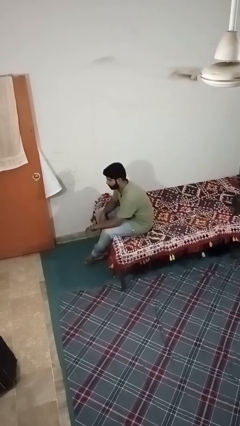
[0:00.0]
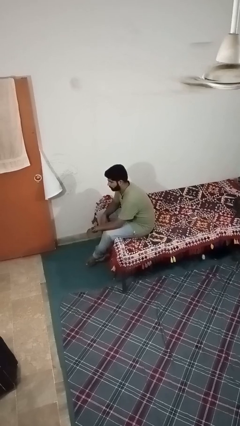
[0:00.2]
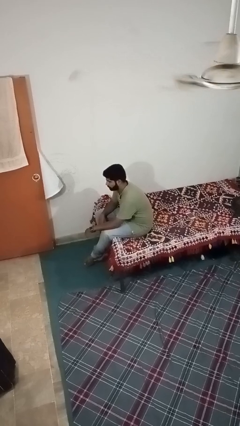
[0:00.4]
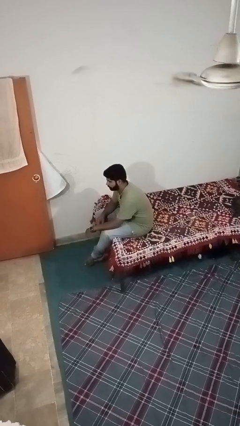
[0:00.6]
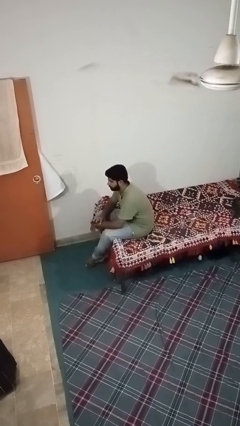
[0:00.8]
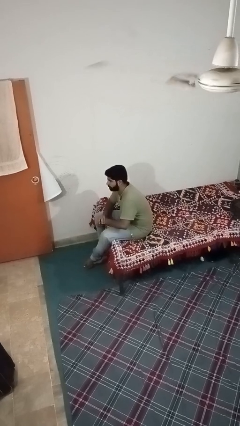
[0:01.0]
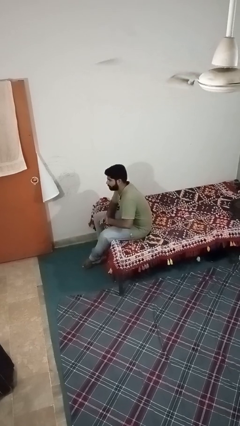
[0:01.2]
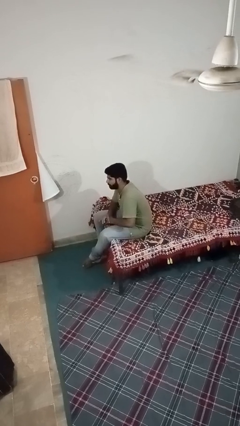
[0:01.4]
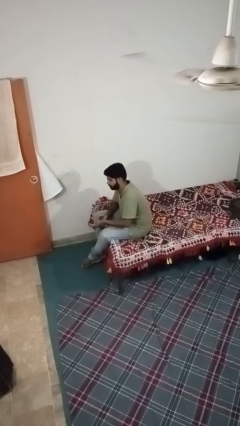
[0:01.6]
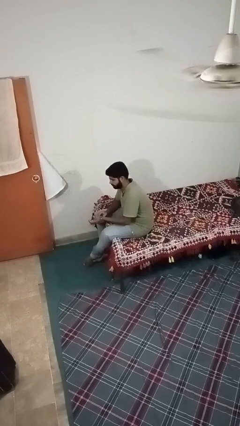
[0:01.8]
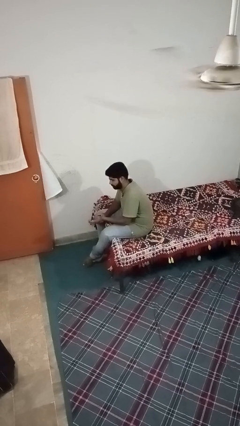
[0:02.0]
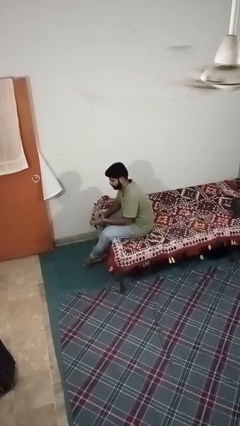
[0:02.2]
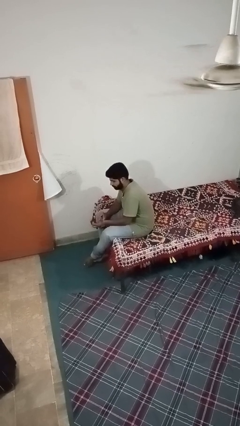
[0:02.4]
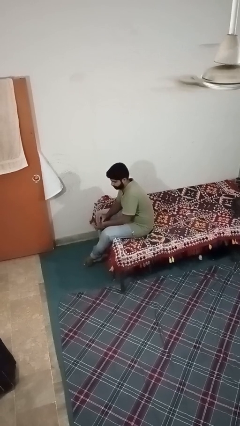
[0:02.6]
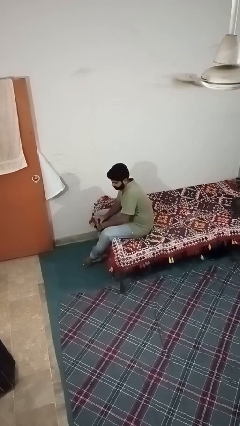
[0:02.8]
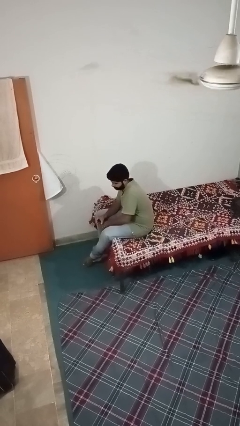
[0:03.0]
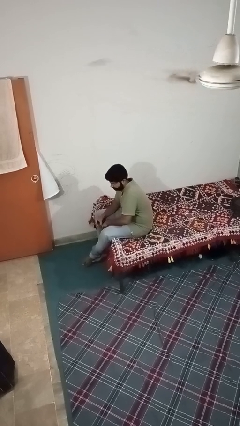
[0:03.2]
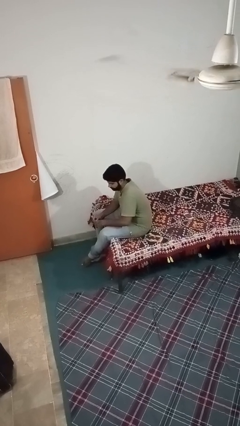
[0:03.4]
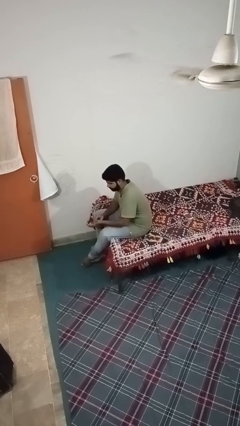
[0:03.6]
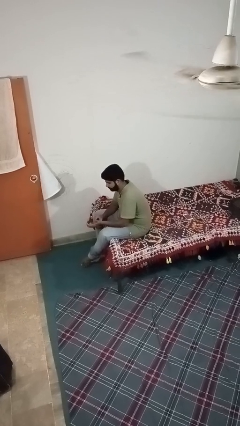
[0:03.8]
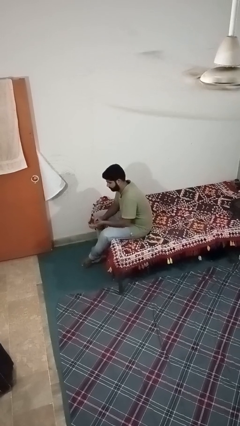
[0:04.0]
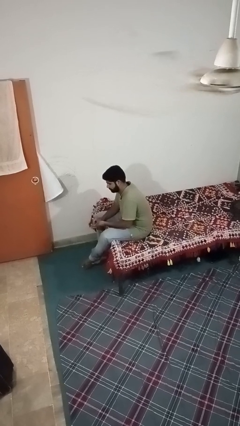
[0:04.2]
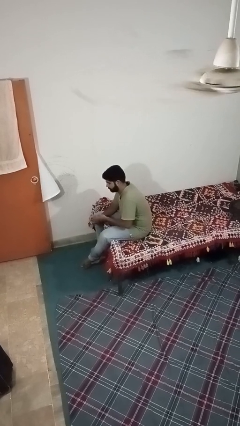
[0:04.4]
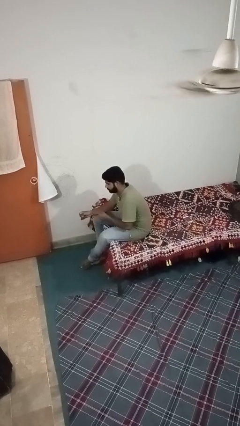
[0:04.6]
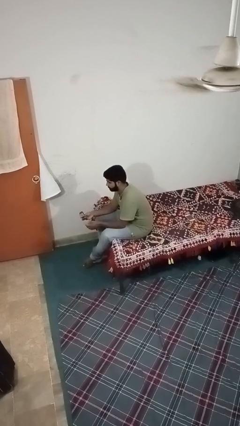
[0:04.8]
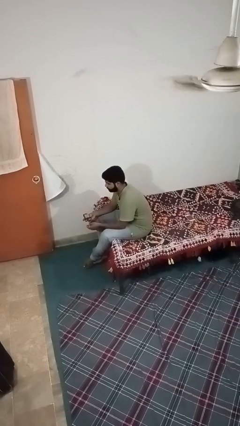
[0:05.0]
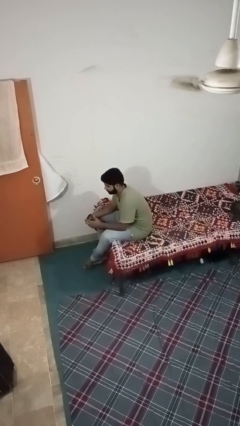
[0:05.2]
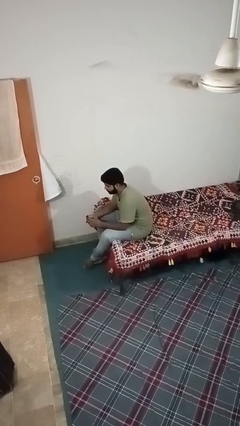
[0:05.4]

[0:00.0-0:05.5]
person takes off wristwatch

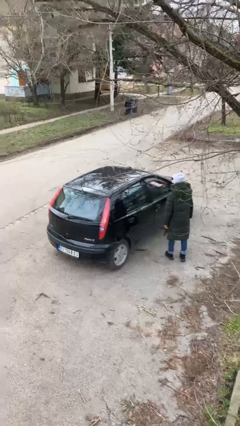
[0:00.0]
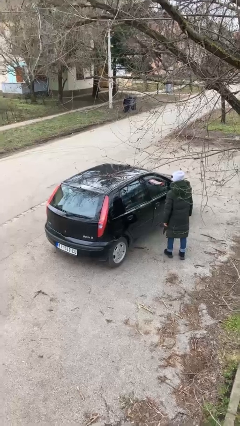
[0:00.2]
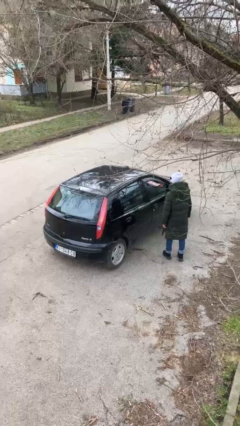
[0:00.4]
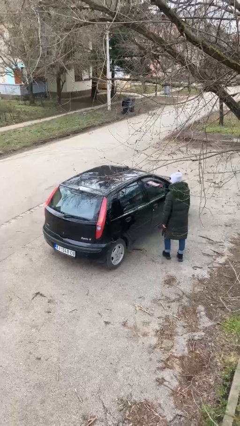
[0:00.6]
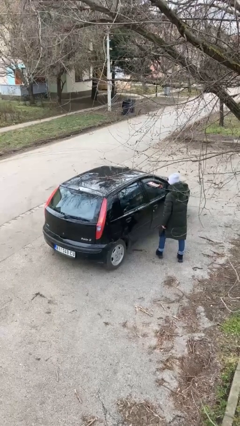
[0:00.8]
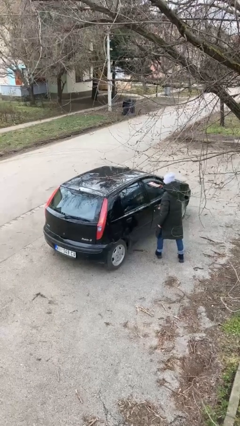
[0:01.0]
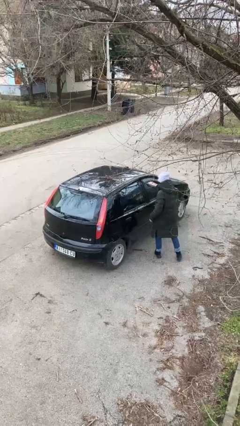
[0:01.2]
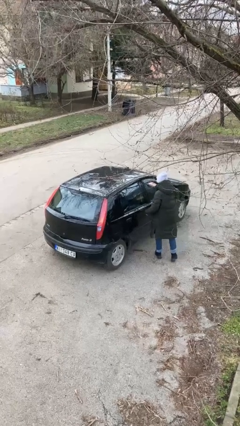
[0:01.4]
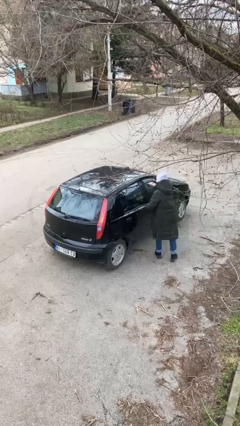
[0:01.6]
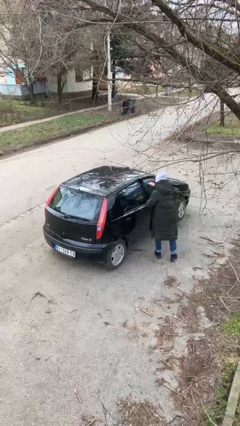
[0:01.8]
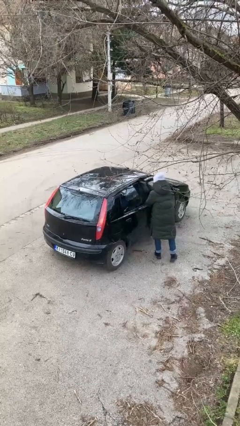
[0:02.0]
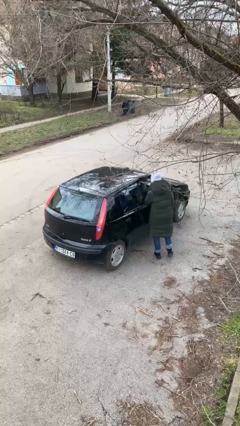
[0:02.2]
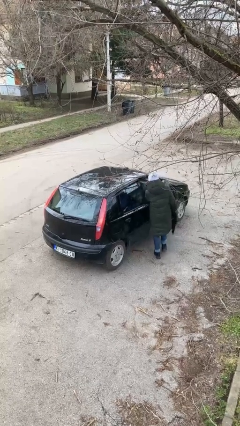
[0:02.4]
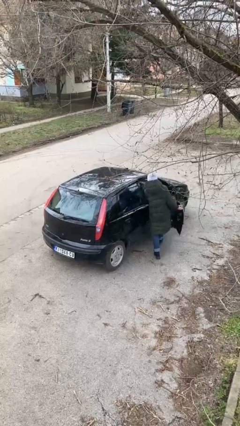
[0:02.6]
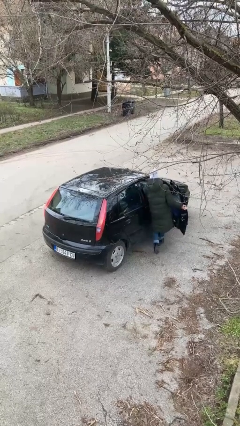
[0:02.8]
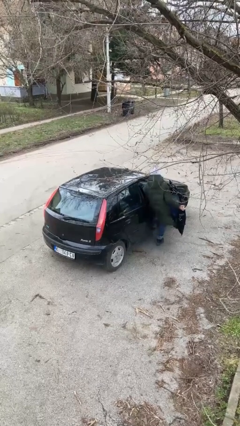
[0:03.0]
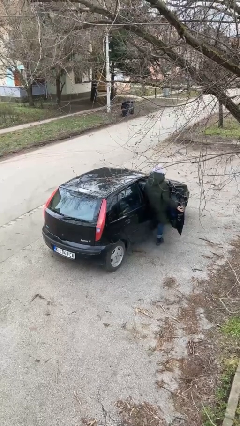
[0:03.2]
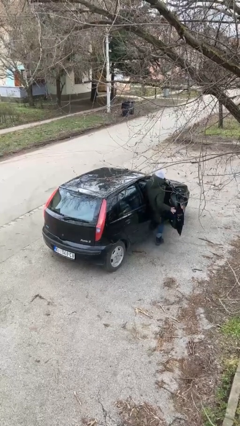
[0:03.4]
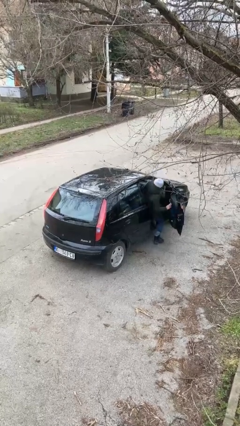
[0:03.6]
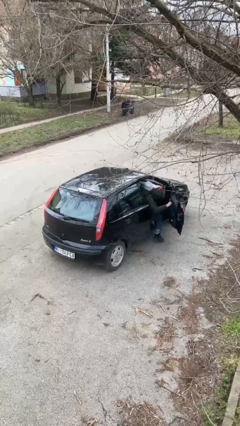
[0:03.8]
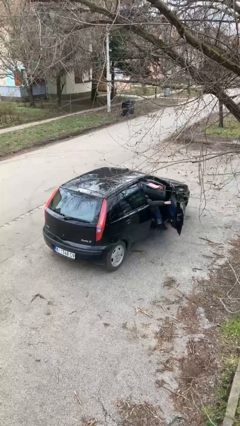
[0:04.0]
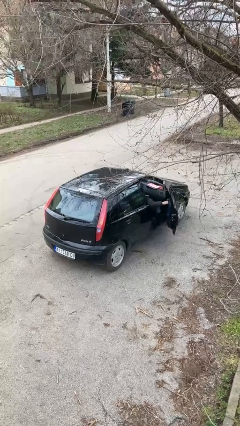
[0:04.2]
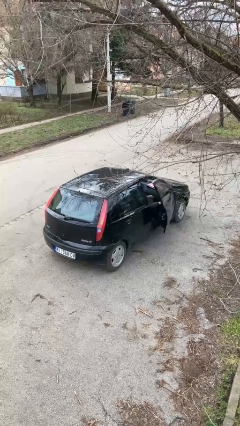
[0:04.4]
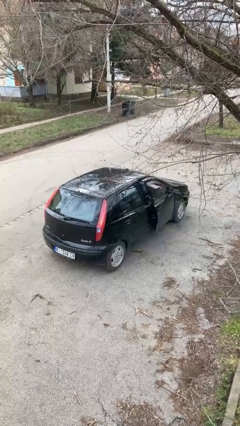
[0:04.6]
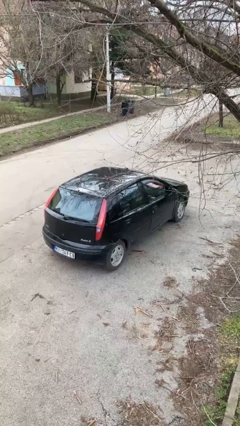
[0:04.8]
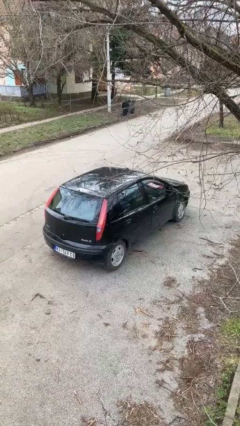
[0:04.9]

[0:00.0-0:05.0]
car picks up person

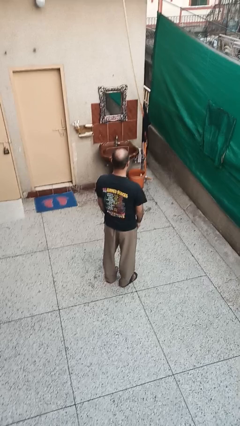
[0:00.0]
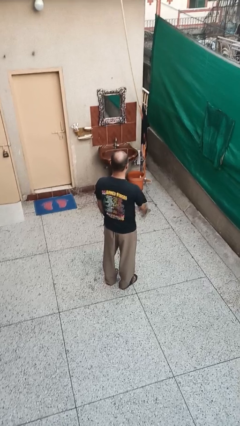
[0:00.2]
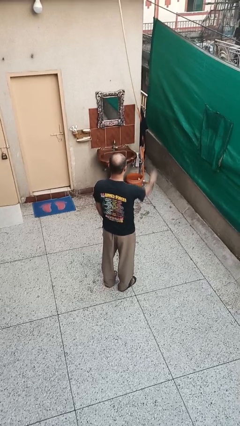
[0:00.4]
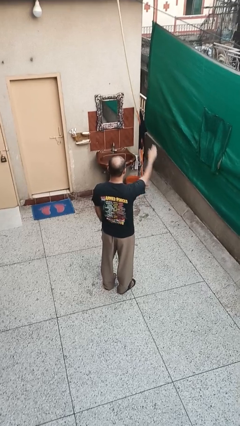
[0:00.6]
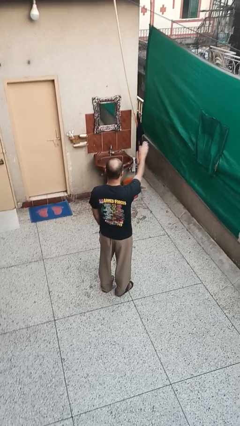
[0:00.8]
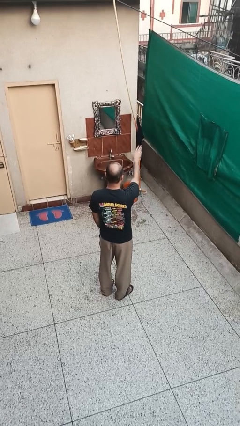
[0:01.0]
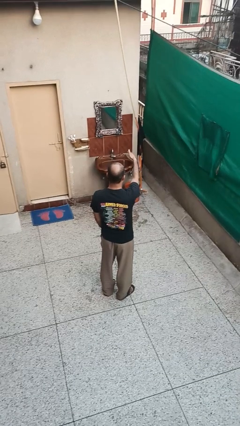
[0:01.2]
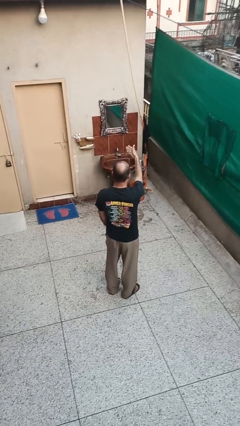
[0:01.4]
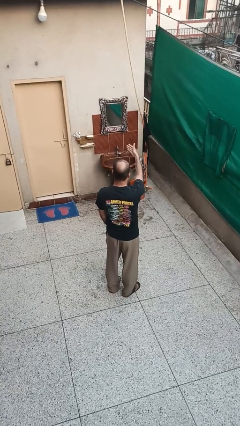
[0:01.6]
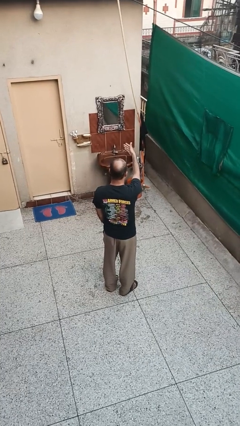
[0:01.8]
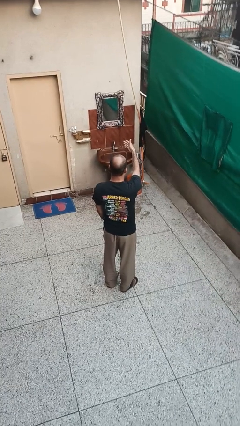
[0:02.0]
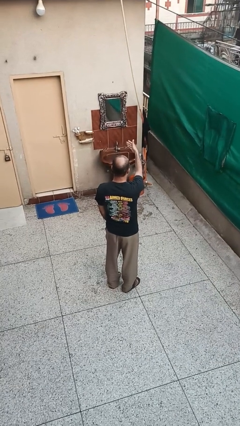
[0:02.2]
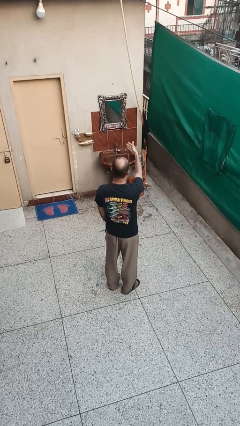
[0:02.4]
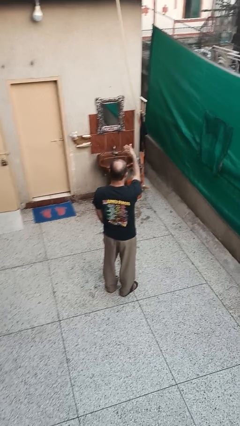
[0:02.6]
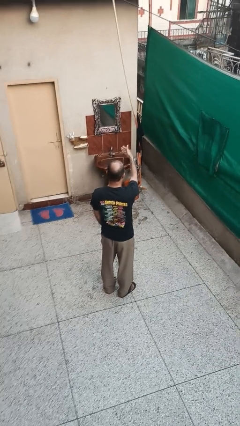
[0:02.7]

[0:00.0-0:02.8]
person gestures swipe left

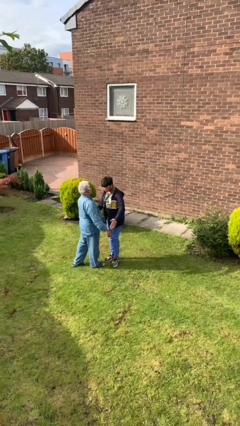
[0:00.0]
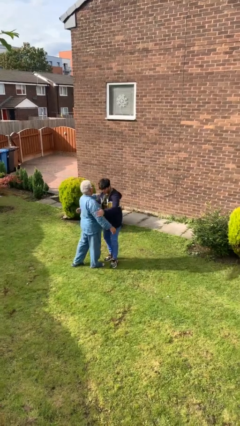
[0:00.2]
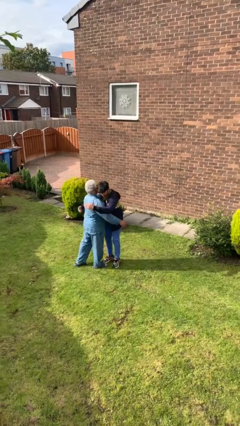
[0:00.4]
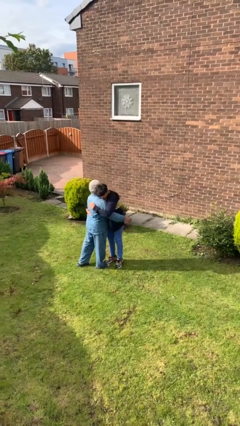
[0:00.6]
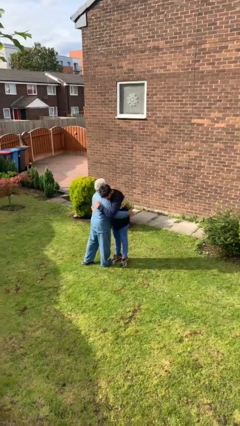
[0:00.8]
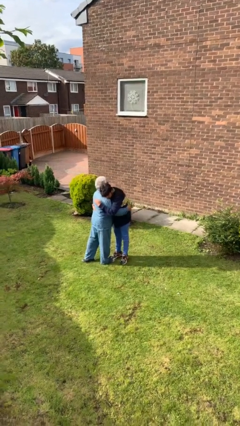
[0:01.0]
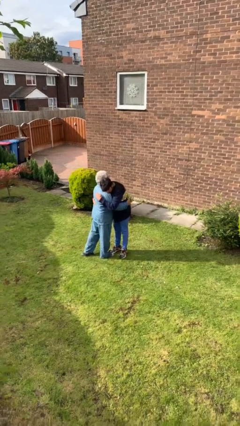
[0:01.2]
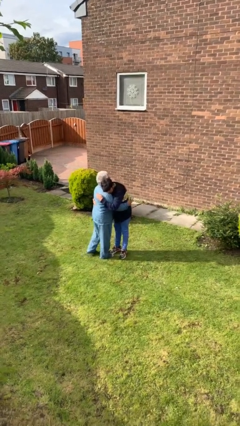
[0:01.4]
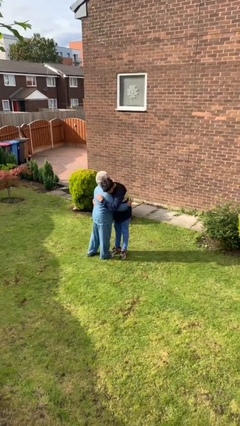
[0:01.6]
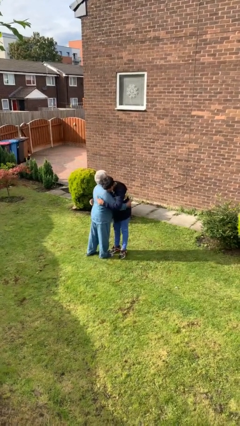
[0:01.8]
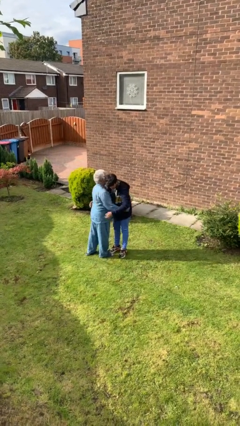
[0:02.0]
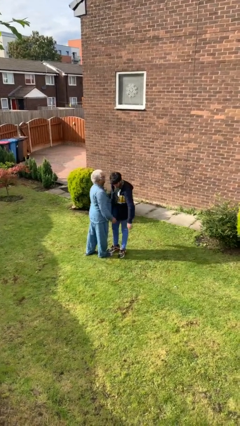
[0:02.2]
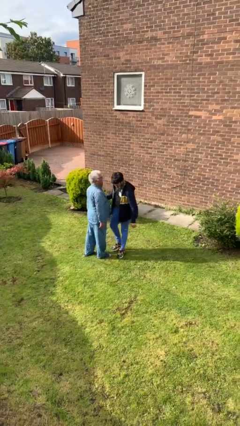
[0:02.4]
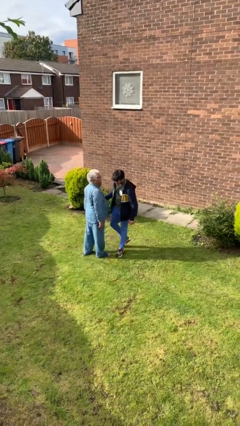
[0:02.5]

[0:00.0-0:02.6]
person embraces person

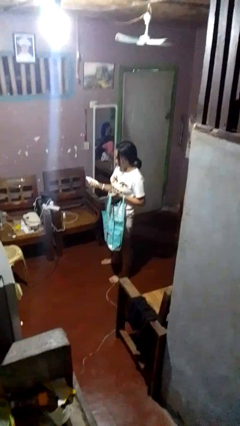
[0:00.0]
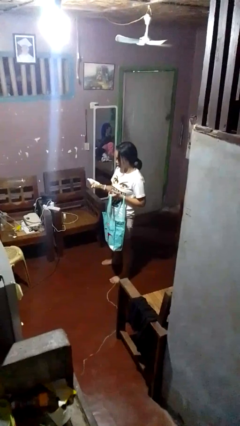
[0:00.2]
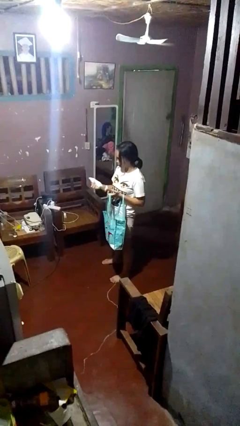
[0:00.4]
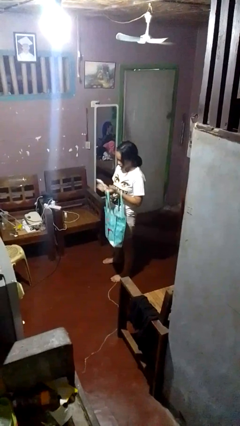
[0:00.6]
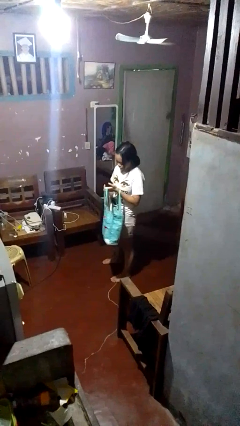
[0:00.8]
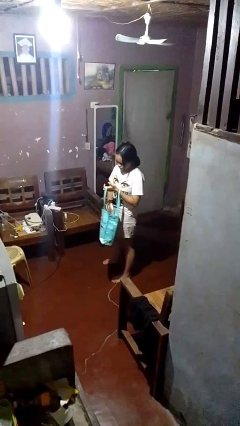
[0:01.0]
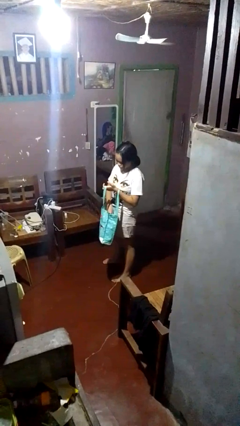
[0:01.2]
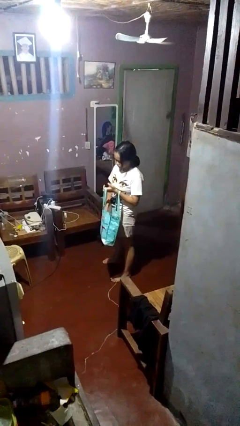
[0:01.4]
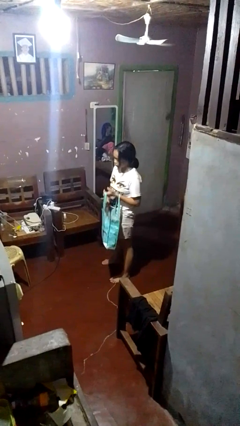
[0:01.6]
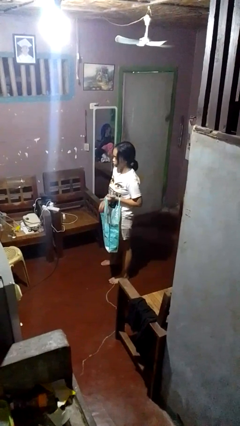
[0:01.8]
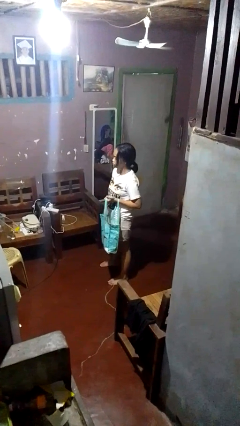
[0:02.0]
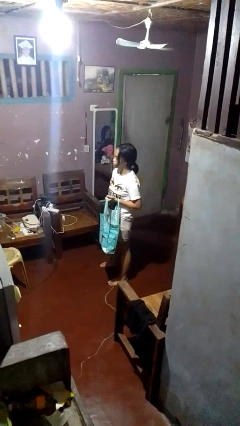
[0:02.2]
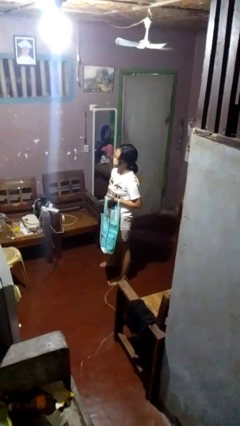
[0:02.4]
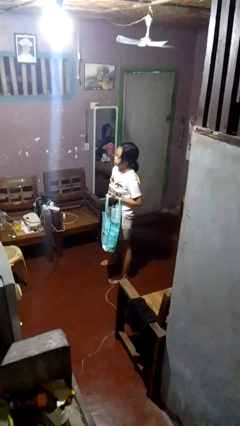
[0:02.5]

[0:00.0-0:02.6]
person puts object into bag
